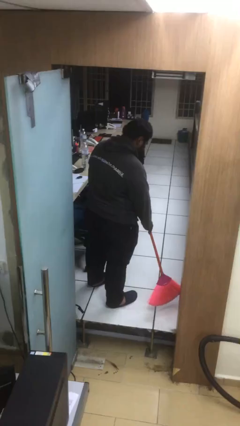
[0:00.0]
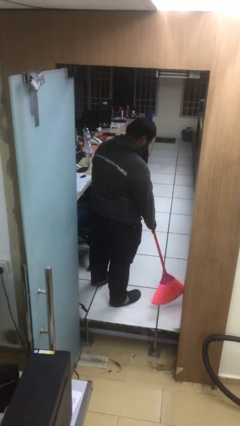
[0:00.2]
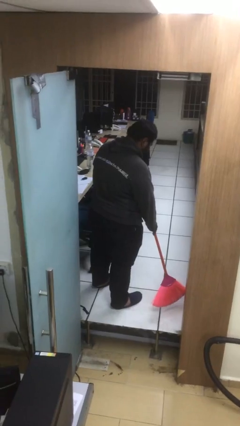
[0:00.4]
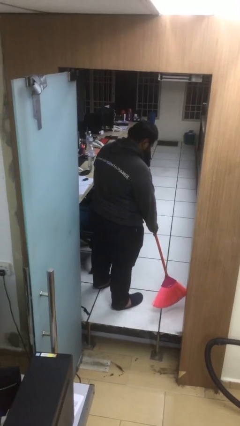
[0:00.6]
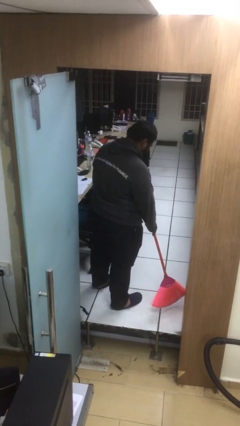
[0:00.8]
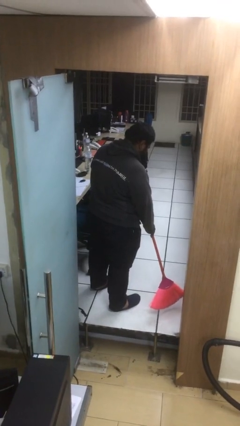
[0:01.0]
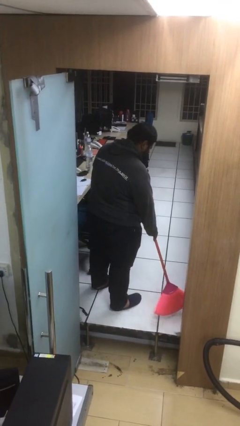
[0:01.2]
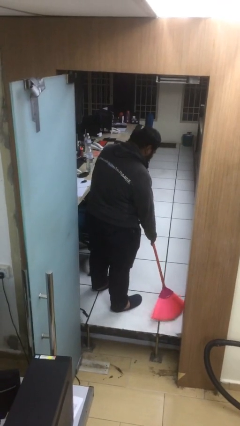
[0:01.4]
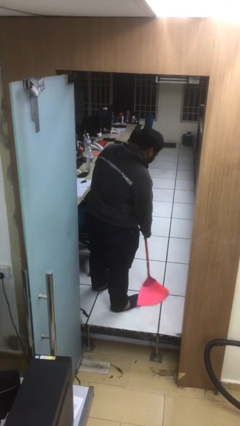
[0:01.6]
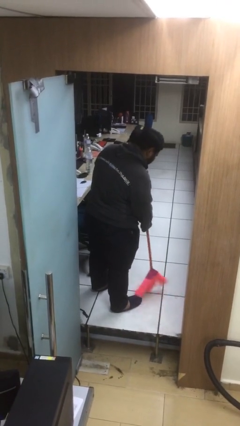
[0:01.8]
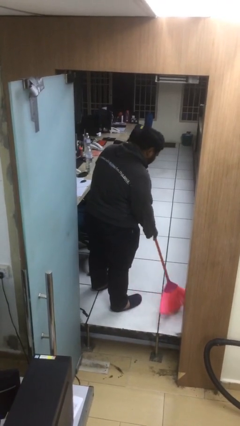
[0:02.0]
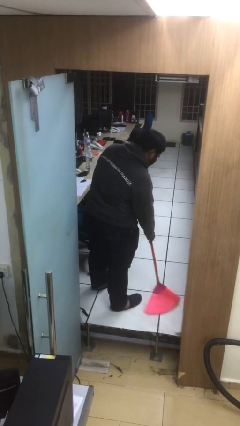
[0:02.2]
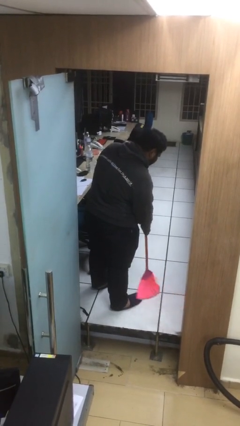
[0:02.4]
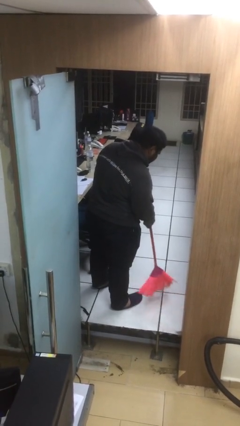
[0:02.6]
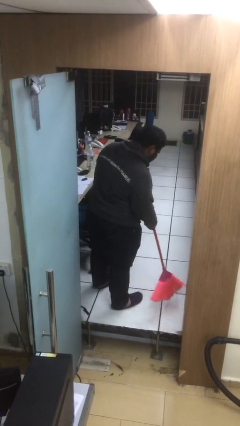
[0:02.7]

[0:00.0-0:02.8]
person sweeps floor

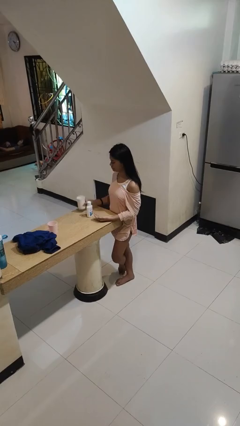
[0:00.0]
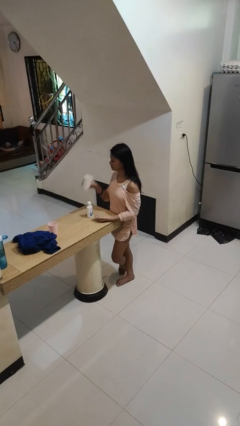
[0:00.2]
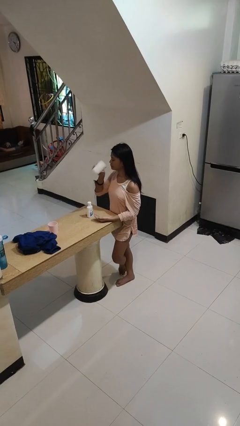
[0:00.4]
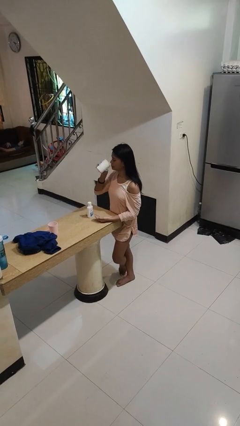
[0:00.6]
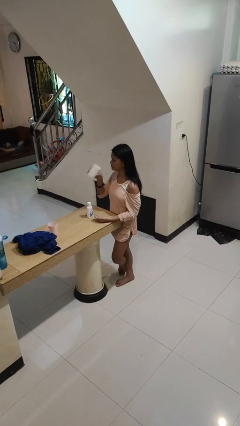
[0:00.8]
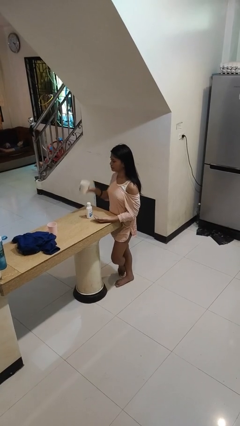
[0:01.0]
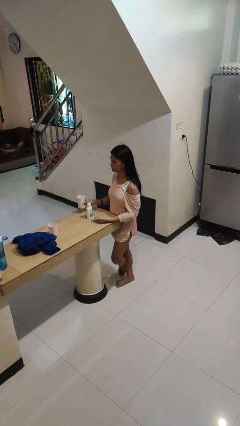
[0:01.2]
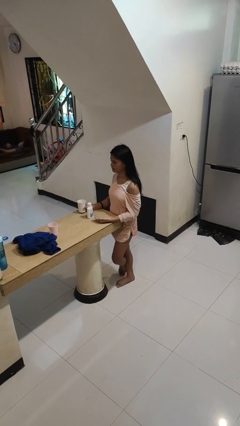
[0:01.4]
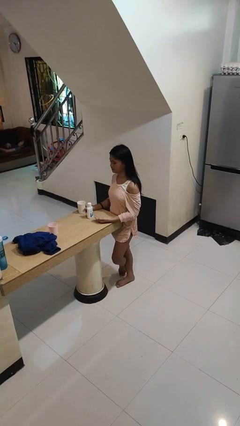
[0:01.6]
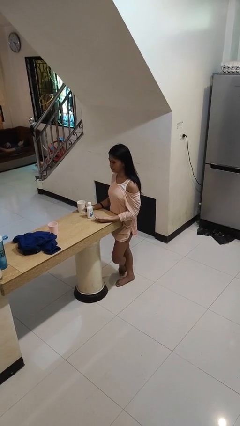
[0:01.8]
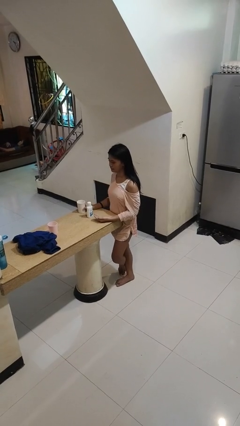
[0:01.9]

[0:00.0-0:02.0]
person drinks from cup

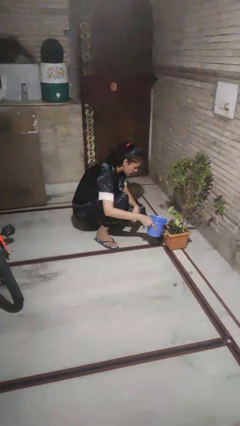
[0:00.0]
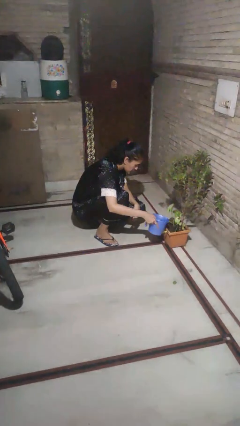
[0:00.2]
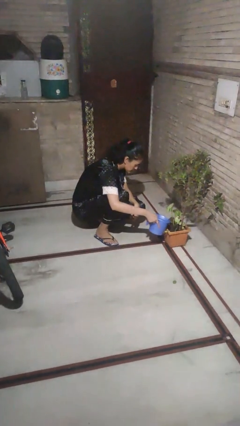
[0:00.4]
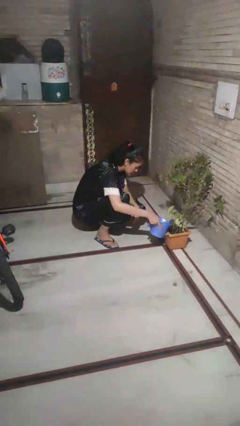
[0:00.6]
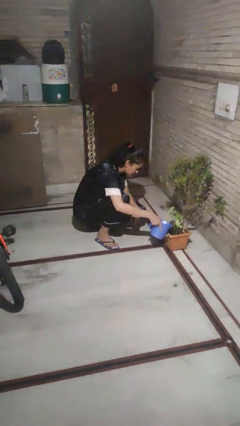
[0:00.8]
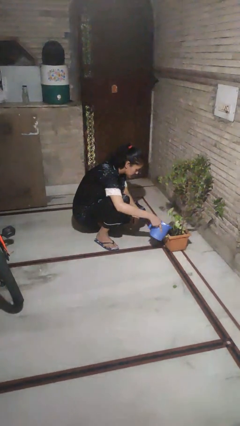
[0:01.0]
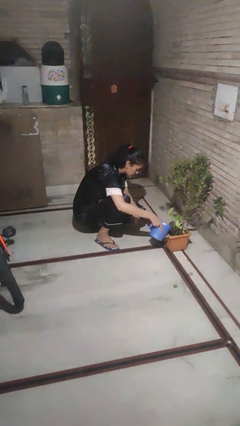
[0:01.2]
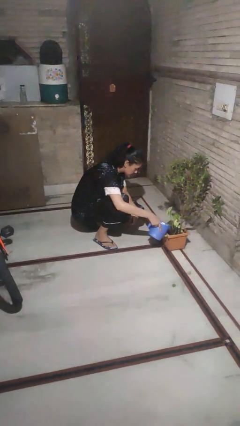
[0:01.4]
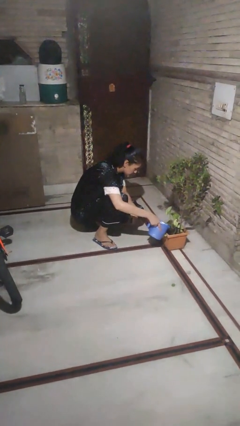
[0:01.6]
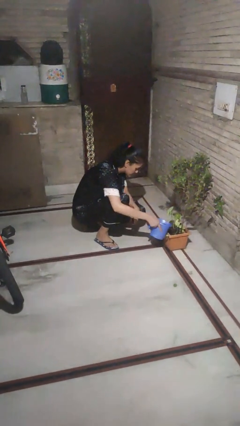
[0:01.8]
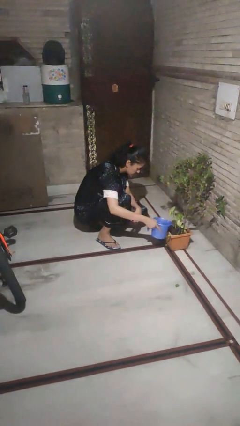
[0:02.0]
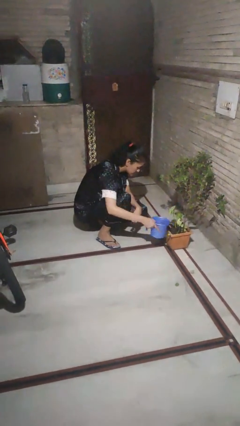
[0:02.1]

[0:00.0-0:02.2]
person waters houseplant

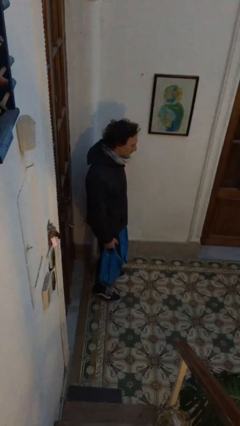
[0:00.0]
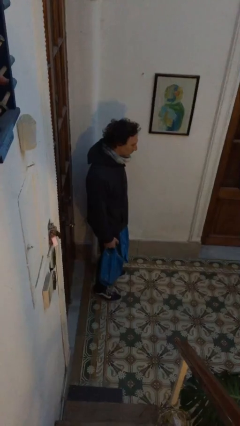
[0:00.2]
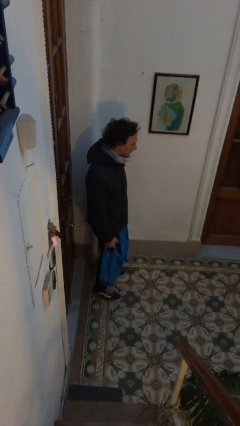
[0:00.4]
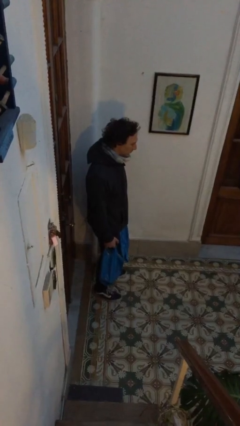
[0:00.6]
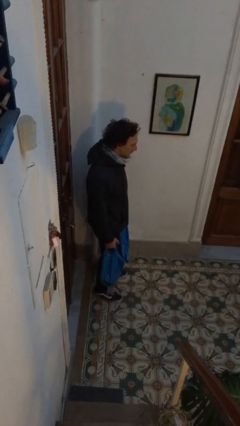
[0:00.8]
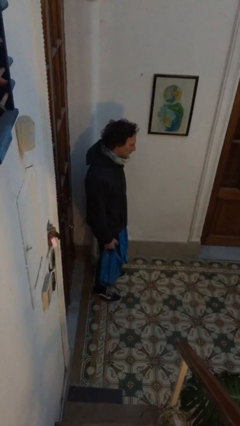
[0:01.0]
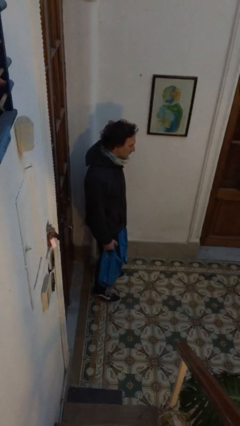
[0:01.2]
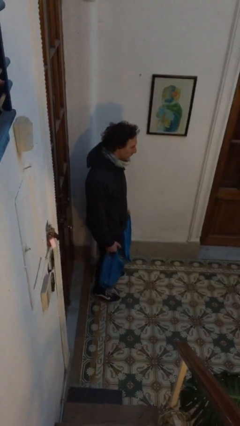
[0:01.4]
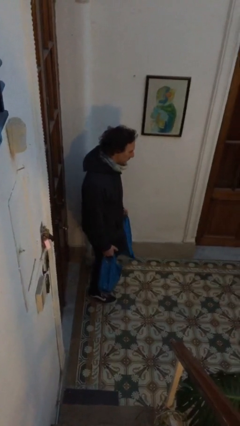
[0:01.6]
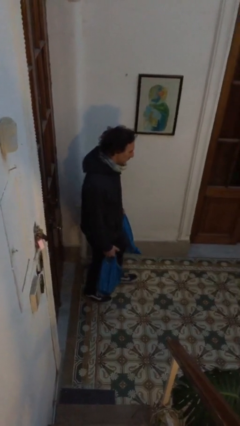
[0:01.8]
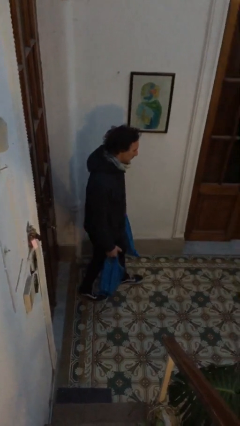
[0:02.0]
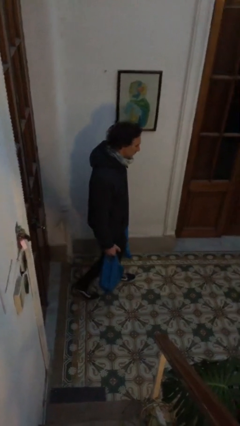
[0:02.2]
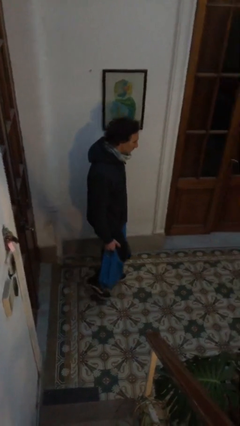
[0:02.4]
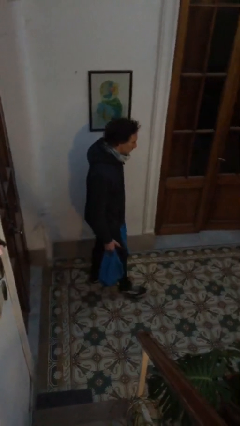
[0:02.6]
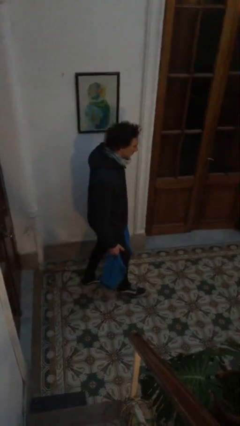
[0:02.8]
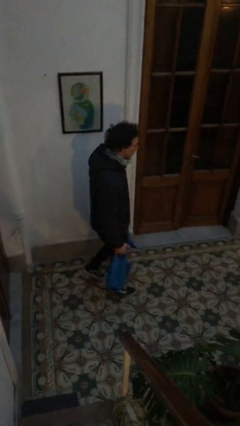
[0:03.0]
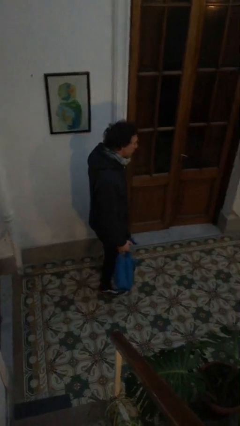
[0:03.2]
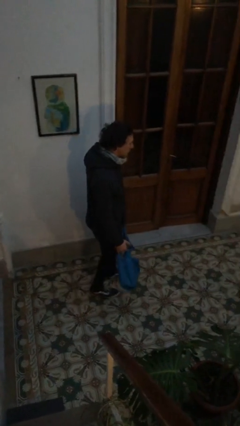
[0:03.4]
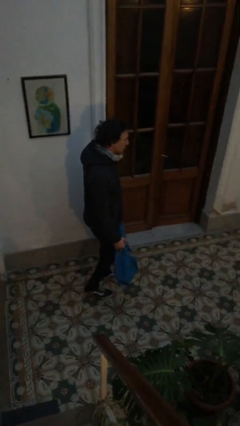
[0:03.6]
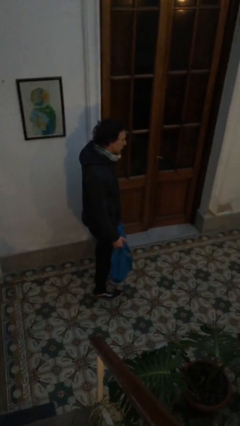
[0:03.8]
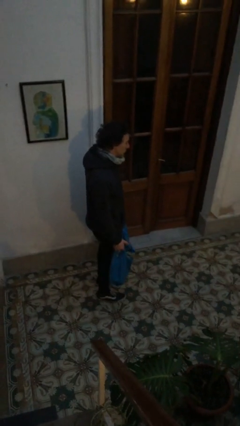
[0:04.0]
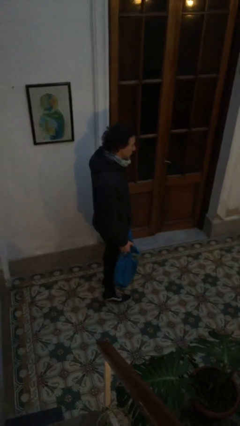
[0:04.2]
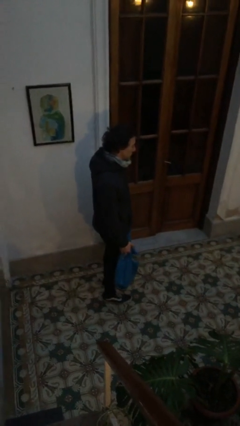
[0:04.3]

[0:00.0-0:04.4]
person carries groceries

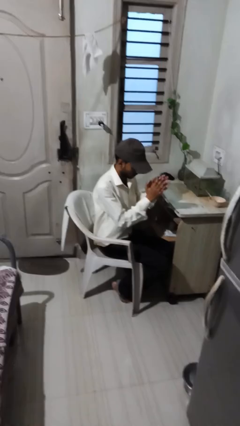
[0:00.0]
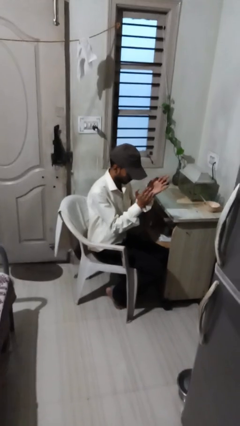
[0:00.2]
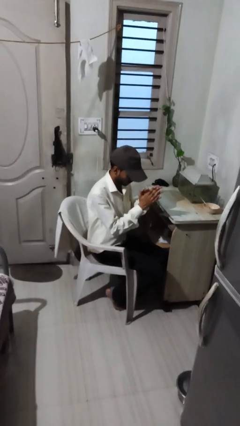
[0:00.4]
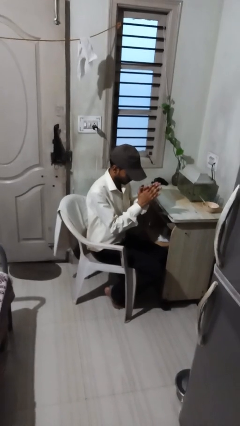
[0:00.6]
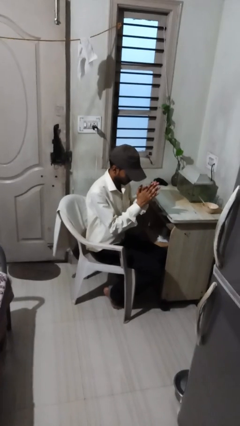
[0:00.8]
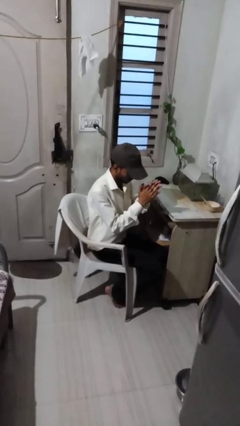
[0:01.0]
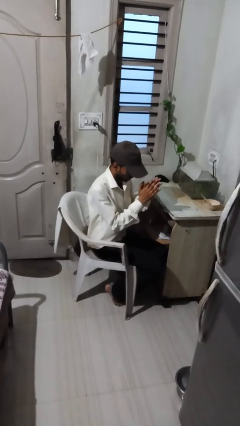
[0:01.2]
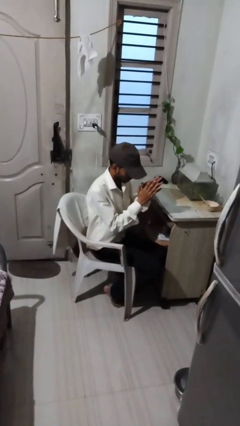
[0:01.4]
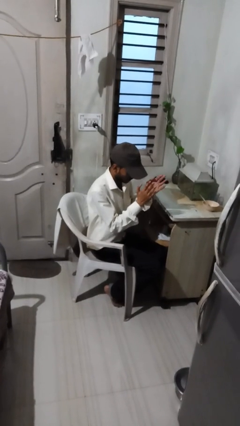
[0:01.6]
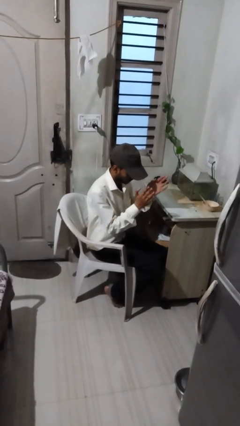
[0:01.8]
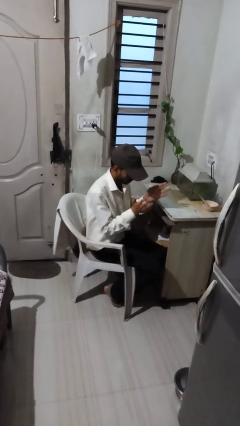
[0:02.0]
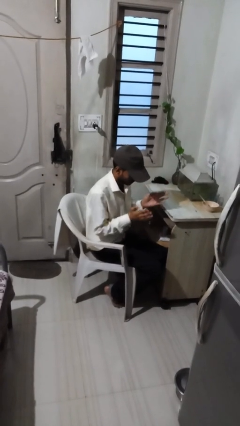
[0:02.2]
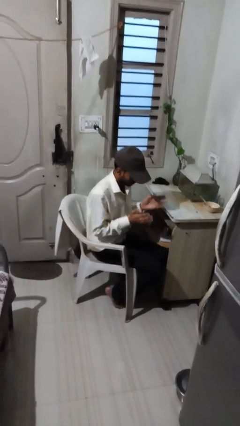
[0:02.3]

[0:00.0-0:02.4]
person claps hands

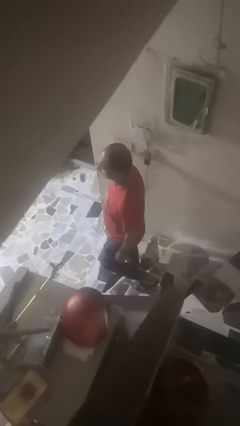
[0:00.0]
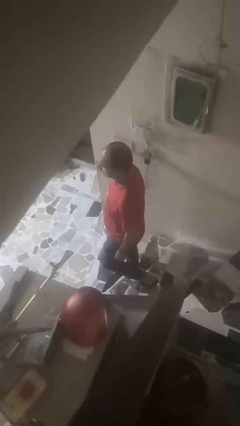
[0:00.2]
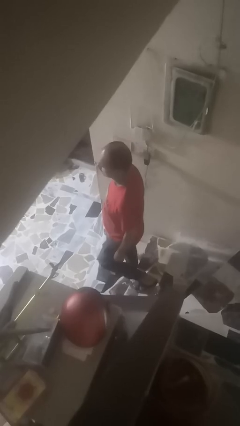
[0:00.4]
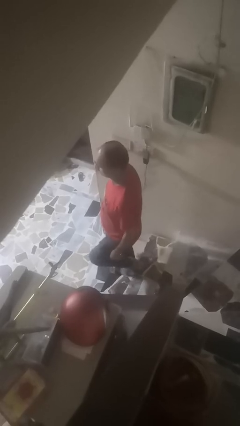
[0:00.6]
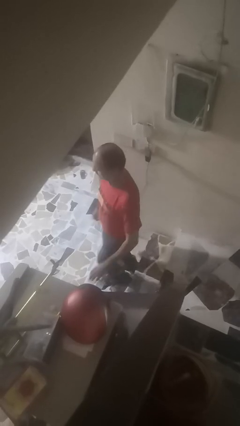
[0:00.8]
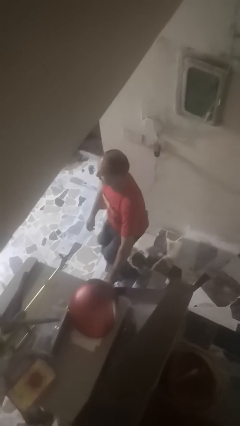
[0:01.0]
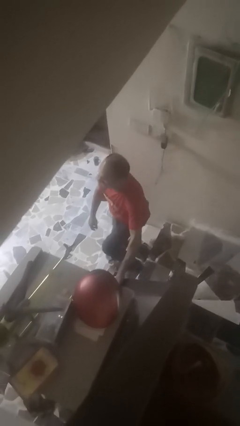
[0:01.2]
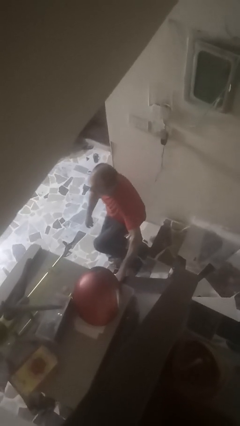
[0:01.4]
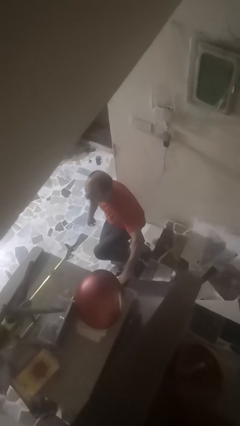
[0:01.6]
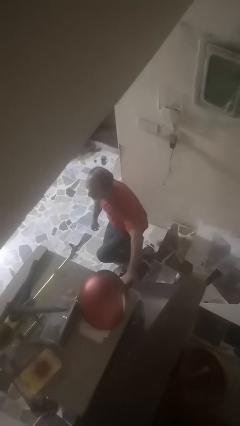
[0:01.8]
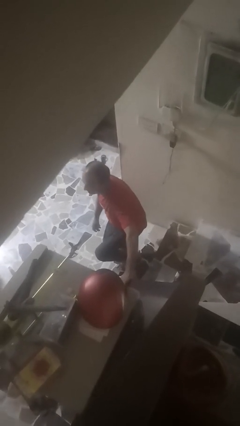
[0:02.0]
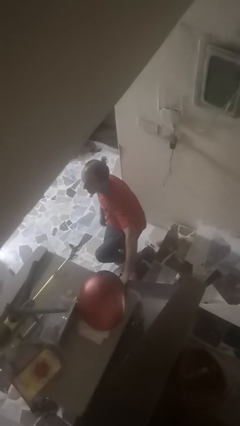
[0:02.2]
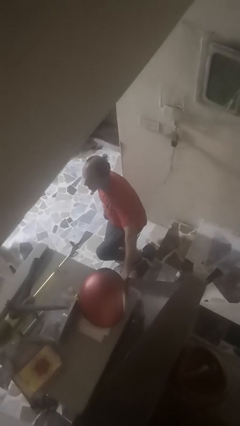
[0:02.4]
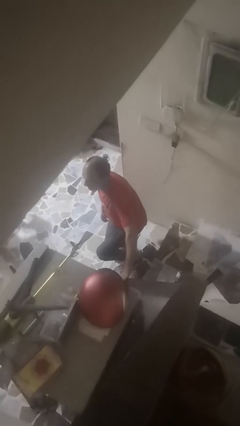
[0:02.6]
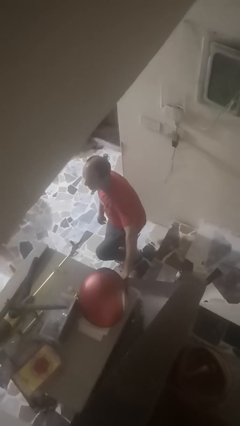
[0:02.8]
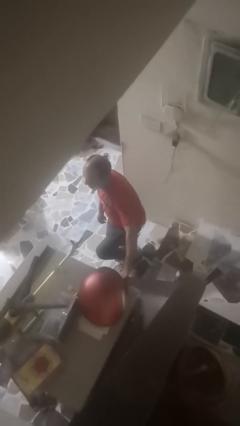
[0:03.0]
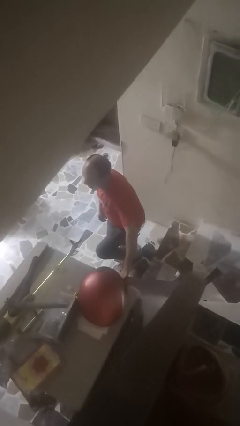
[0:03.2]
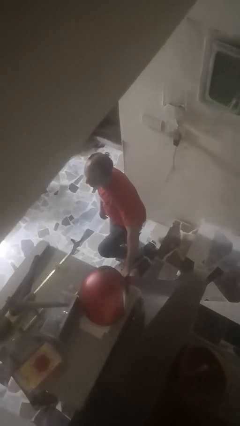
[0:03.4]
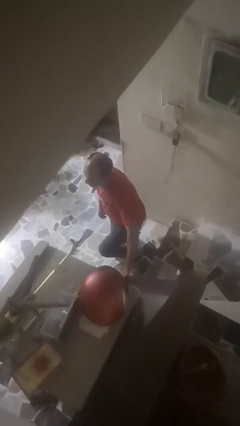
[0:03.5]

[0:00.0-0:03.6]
person trips on stair

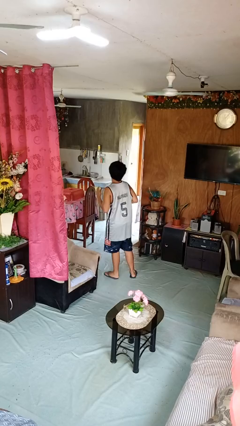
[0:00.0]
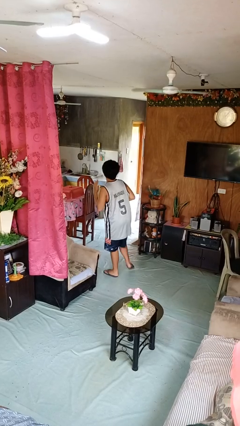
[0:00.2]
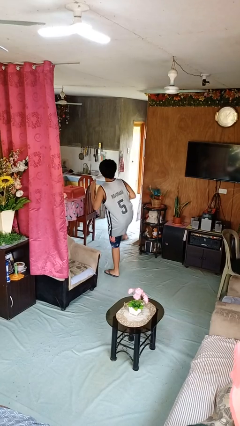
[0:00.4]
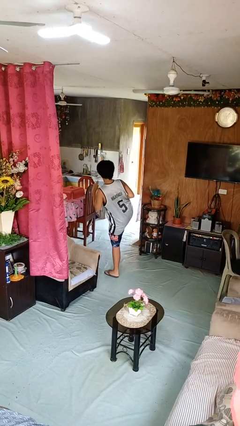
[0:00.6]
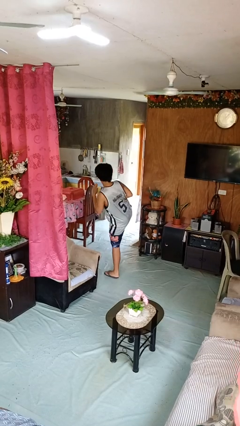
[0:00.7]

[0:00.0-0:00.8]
person karate kicks
